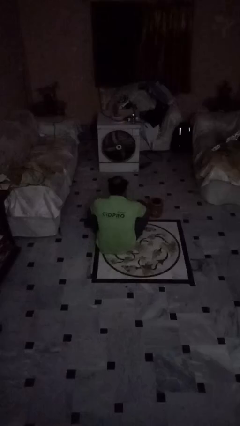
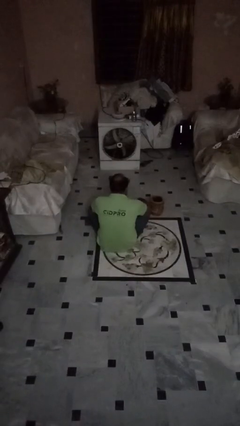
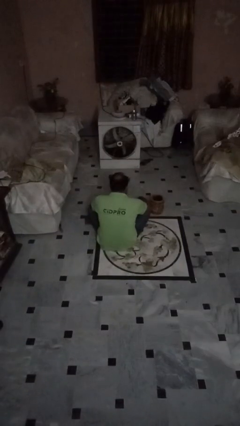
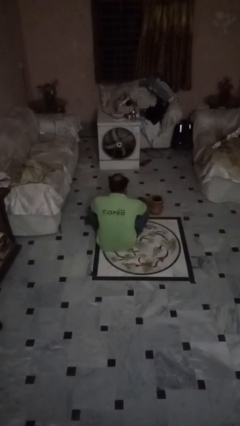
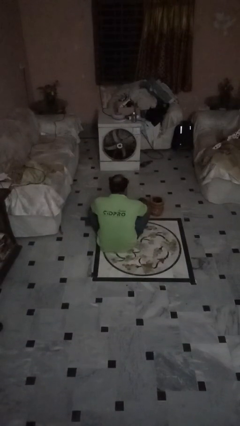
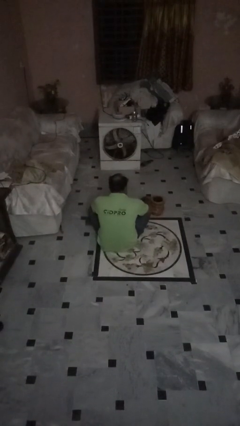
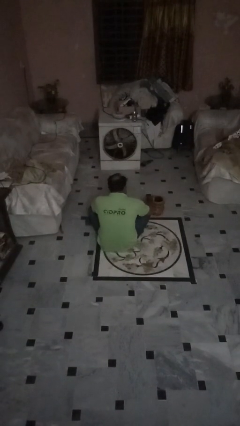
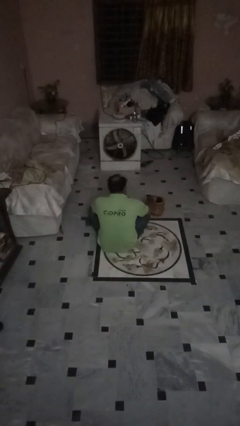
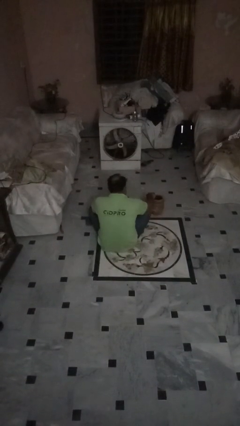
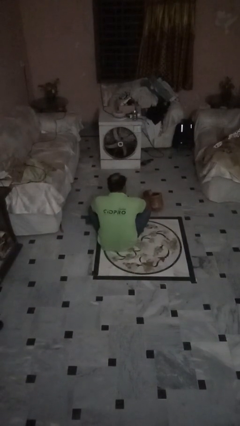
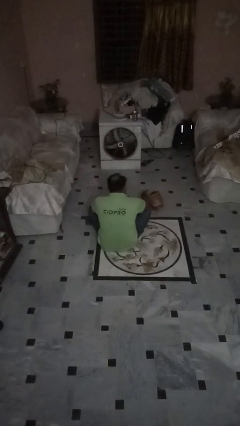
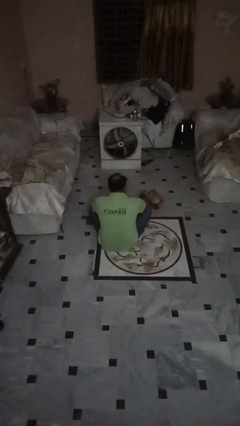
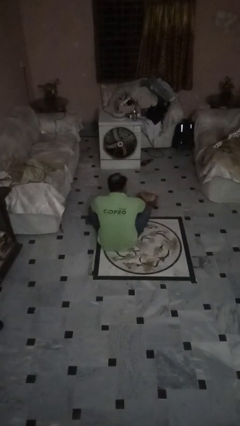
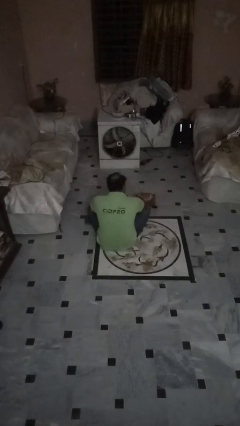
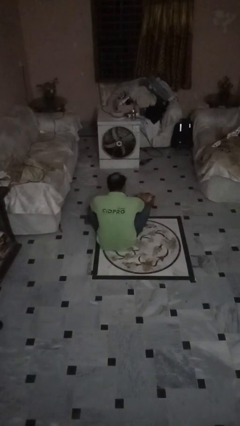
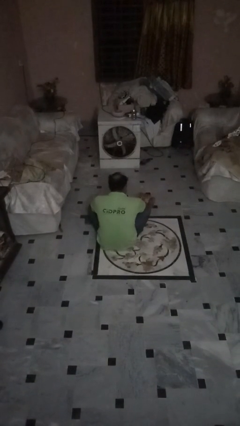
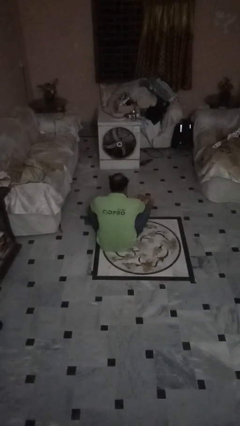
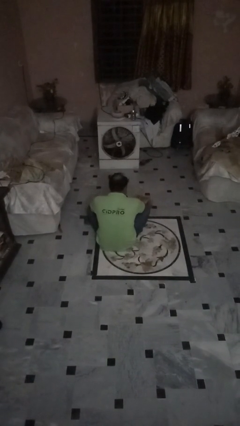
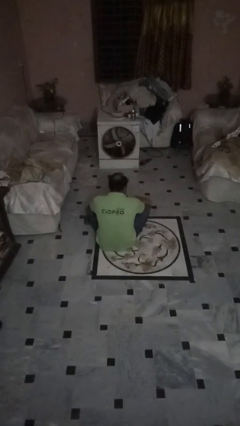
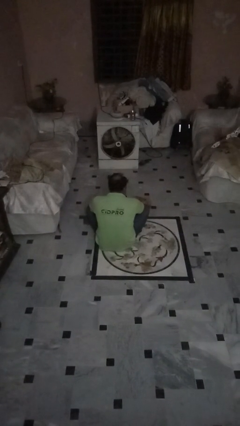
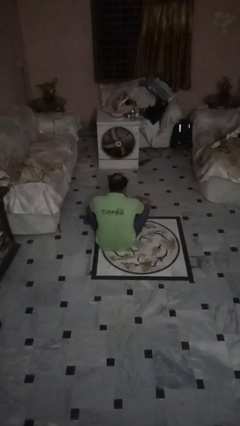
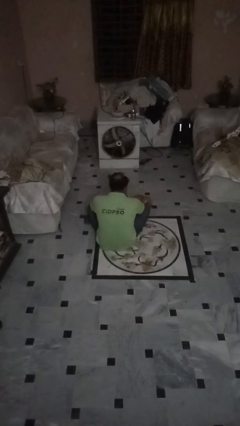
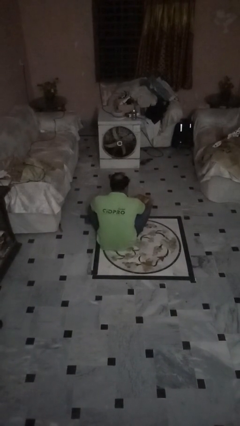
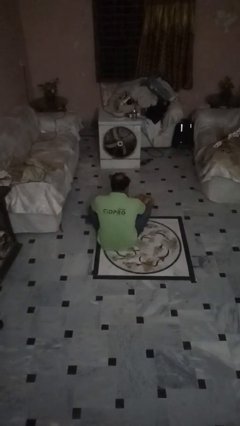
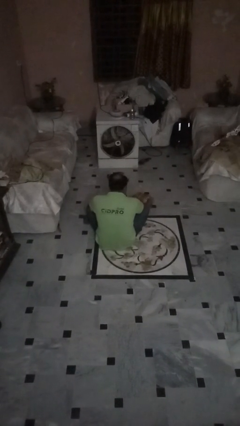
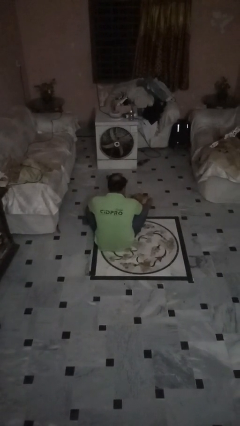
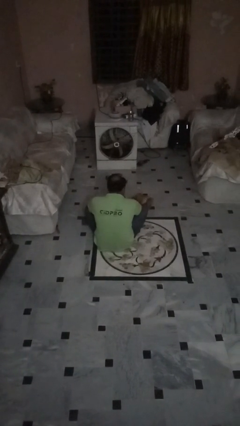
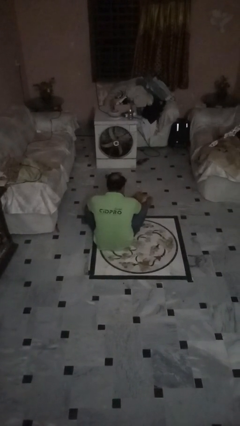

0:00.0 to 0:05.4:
person knocks over furniture

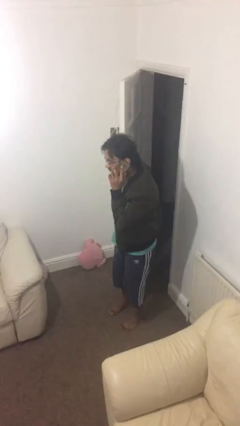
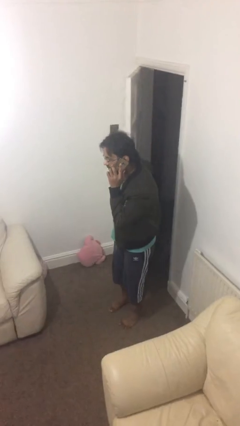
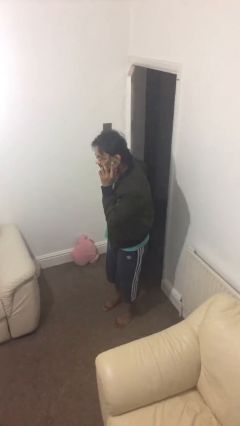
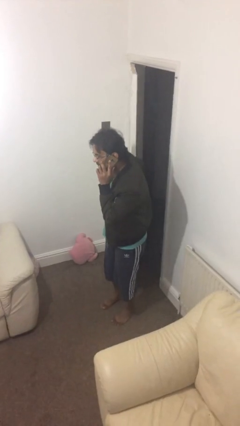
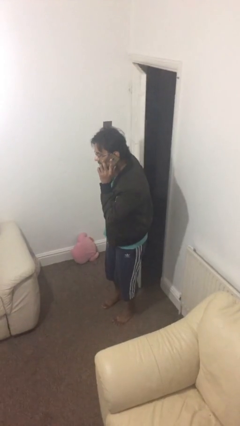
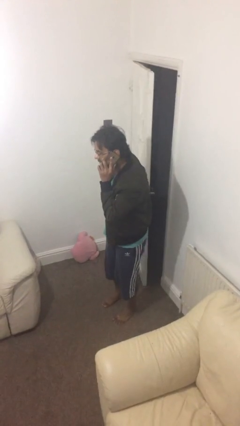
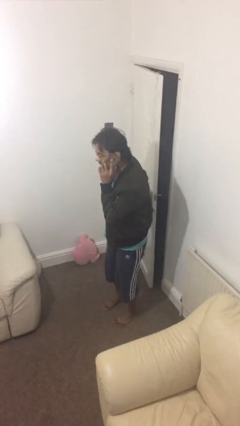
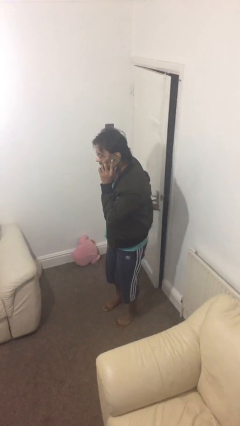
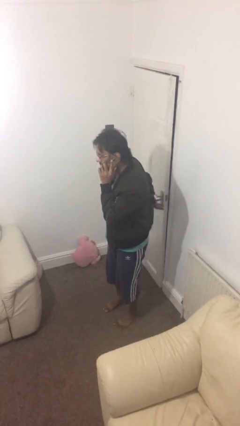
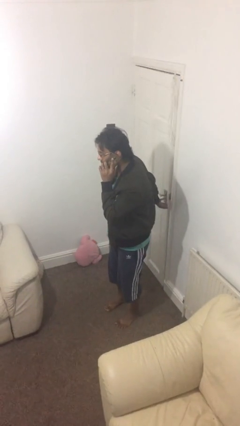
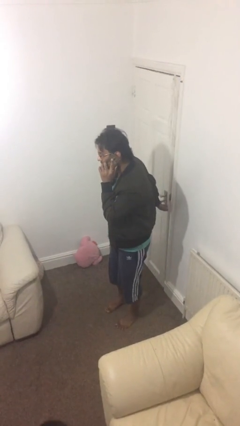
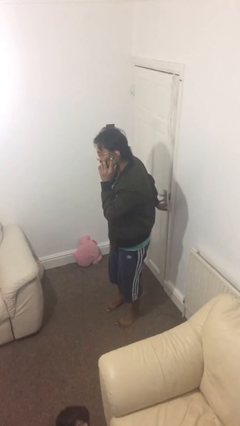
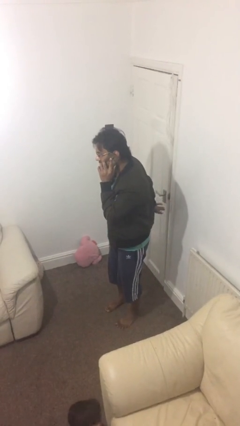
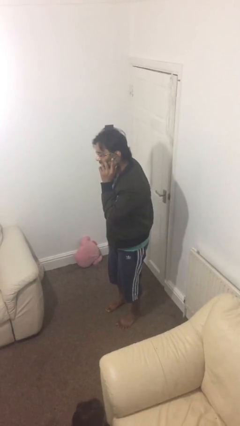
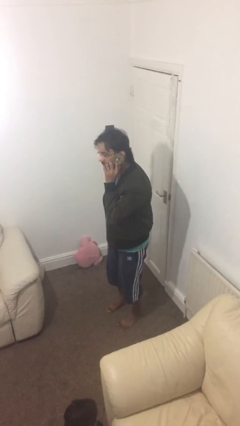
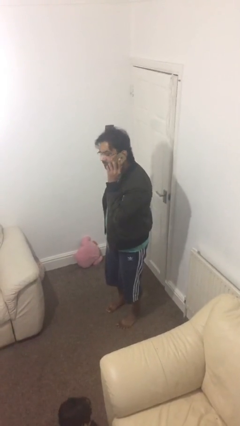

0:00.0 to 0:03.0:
person closes facility door

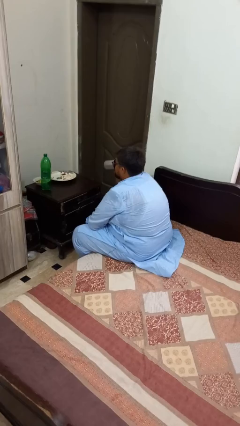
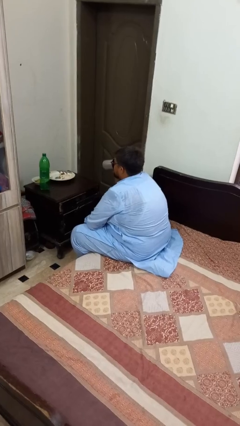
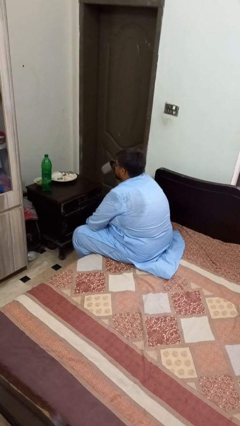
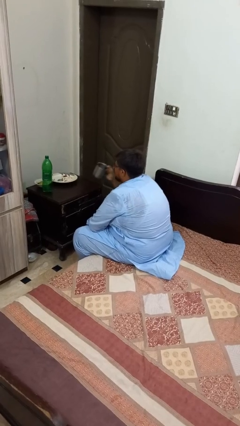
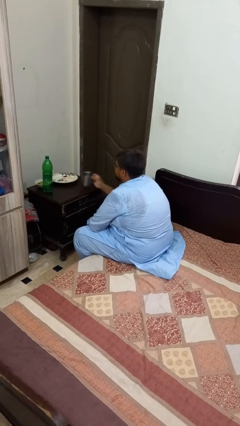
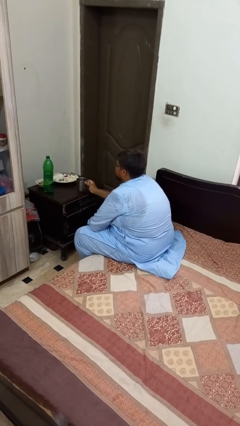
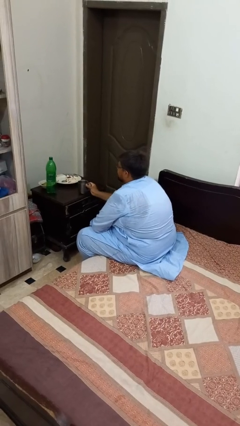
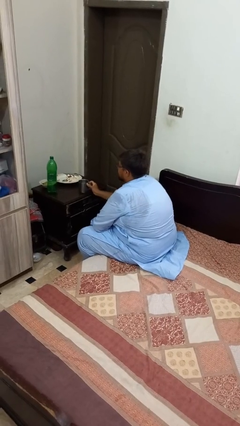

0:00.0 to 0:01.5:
person puts down object on table

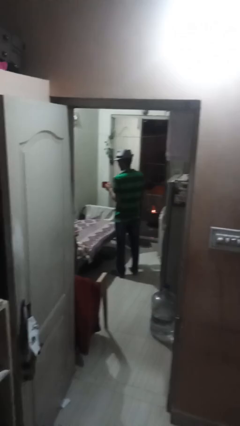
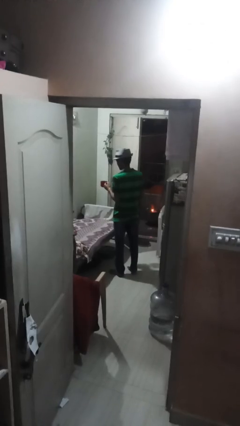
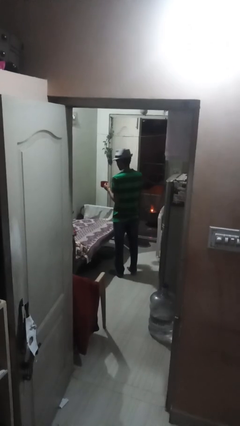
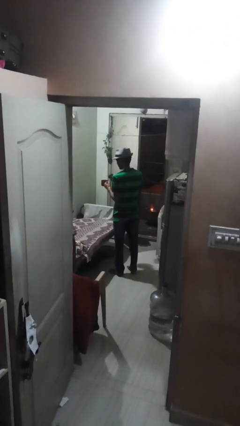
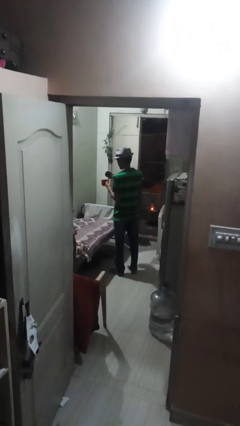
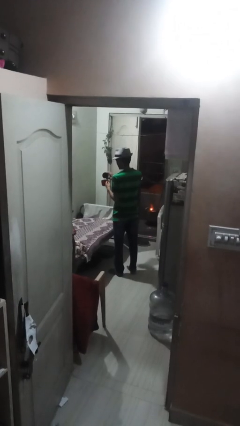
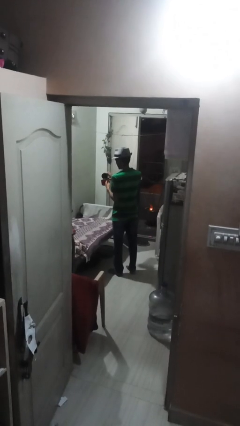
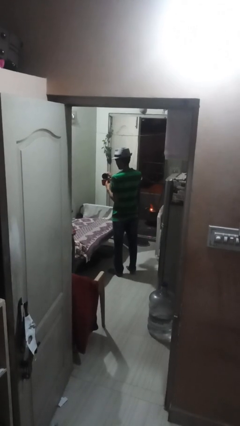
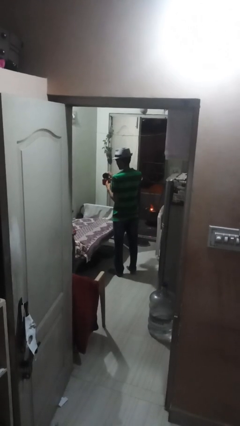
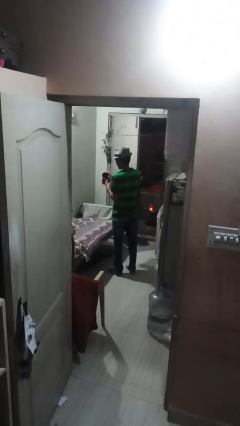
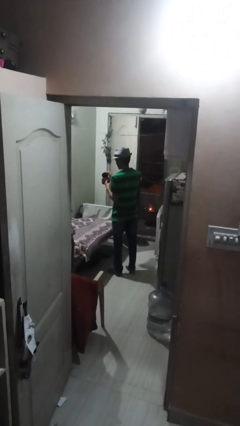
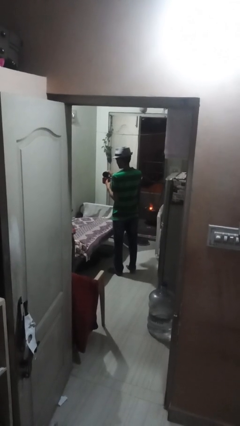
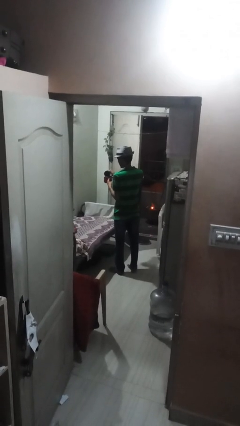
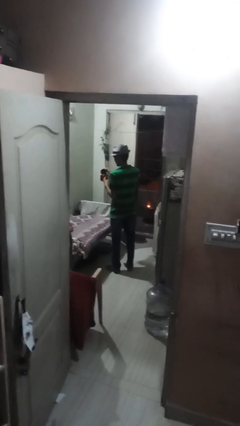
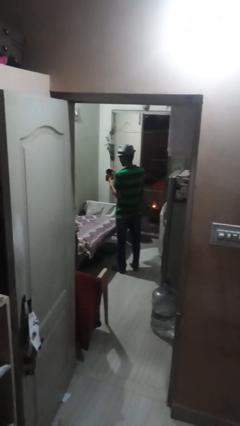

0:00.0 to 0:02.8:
person pours coffee into mug

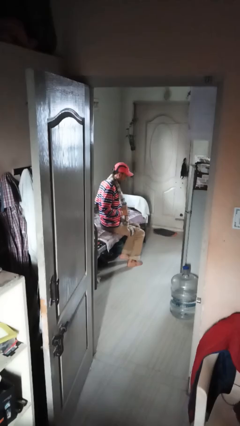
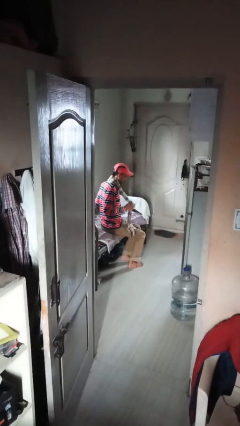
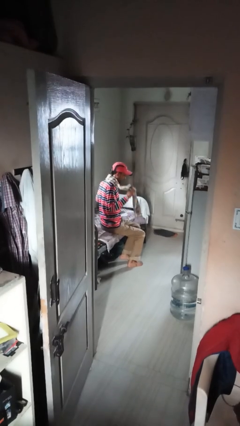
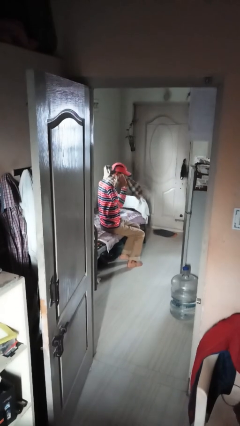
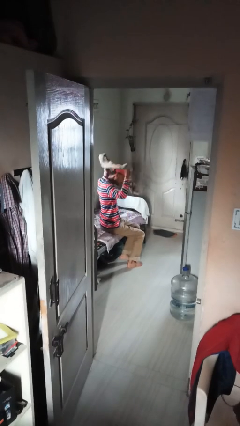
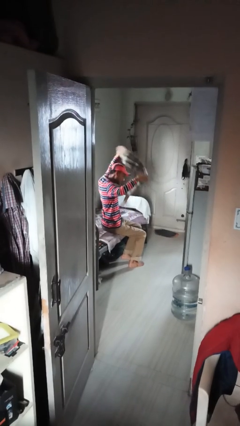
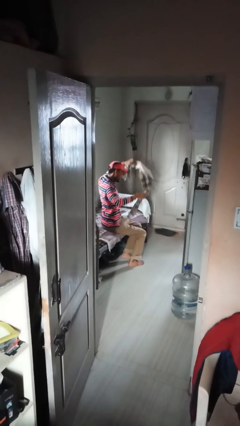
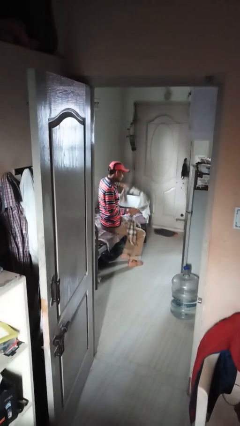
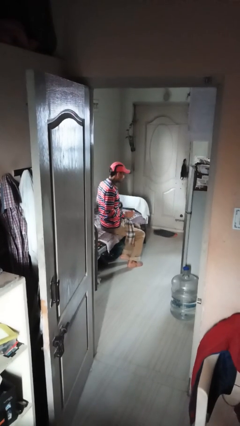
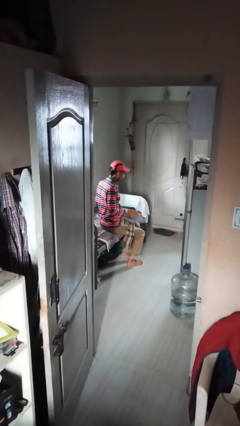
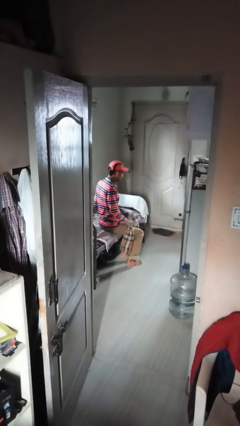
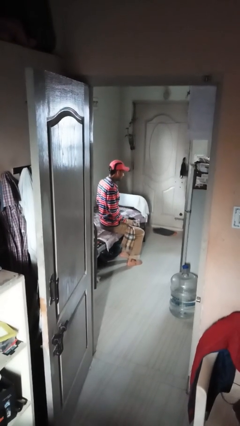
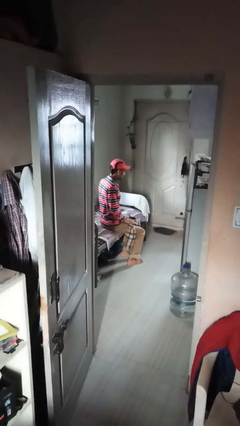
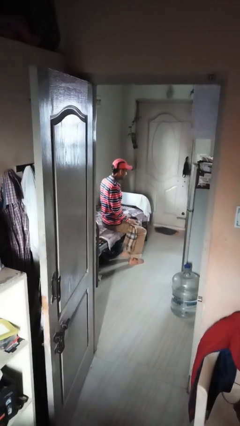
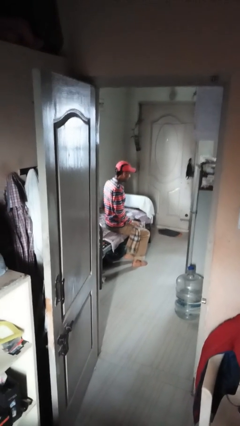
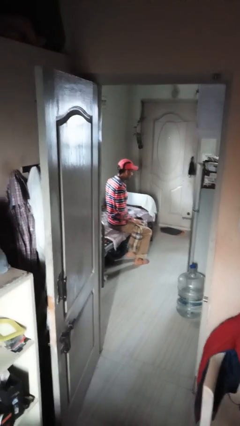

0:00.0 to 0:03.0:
person takes off scarf

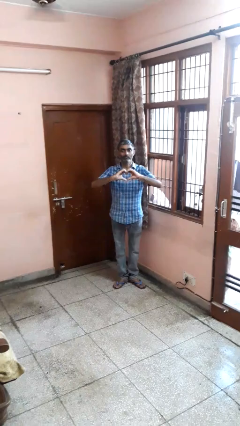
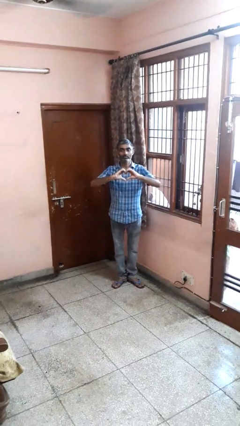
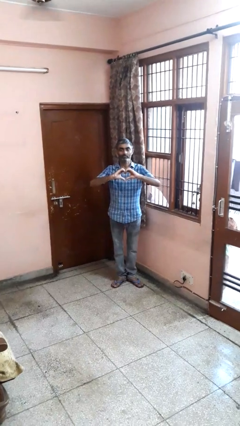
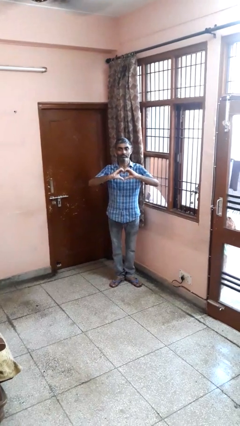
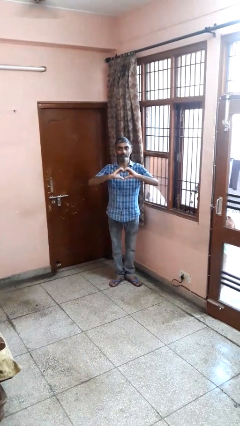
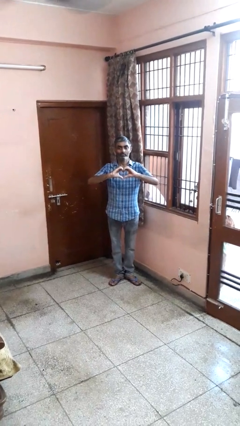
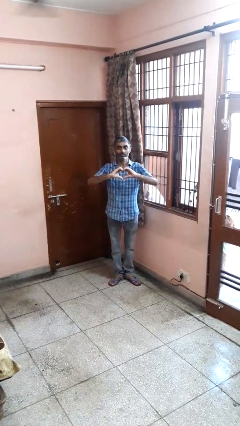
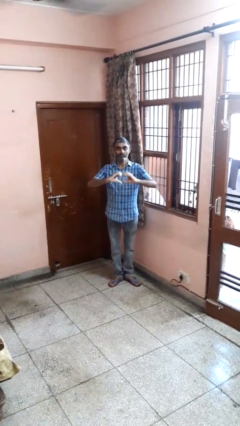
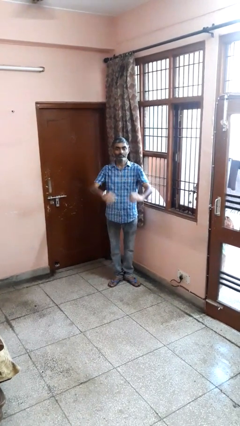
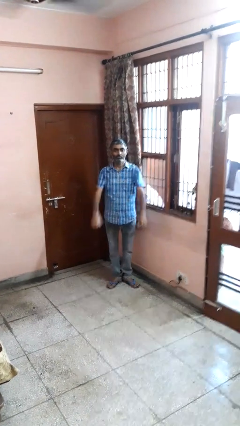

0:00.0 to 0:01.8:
person gestures heart
